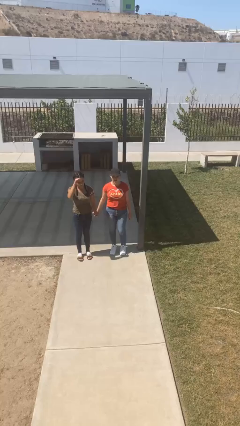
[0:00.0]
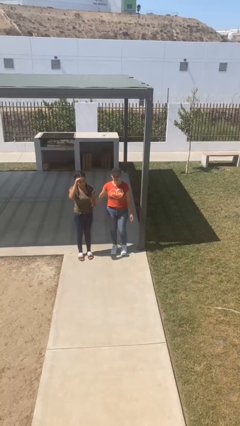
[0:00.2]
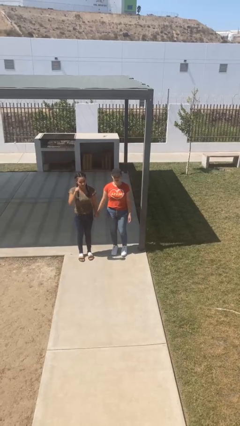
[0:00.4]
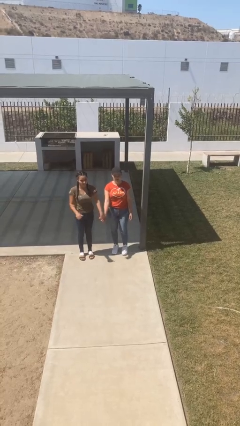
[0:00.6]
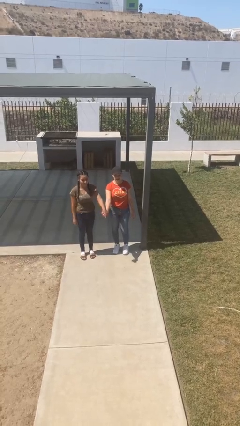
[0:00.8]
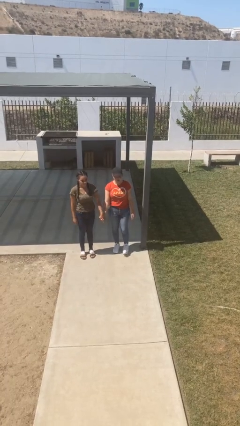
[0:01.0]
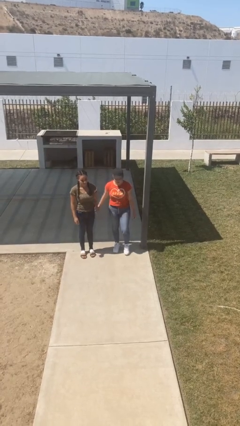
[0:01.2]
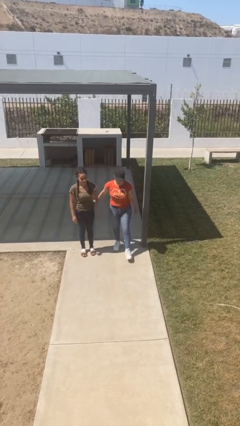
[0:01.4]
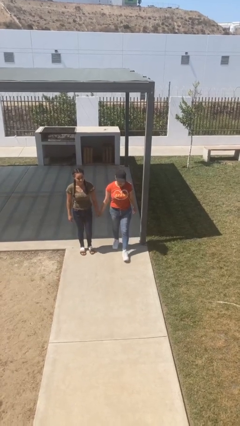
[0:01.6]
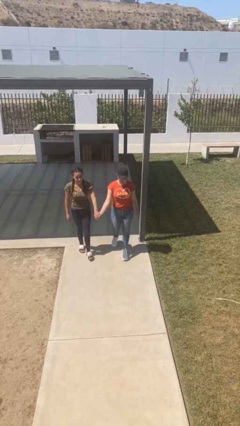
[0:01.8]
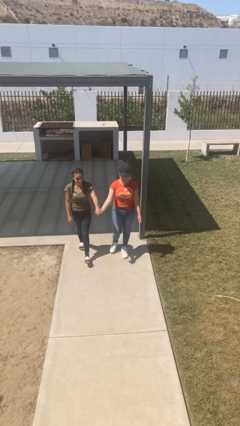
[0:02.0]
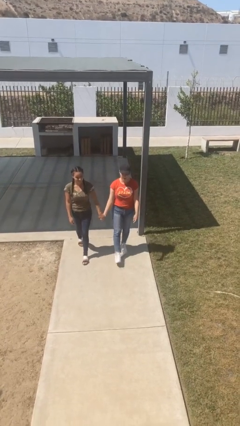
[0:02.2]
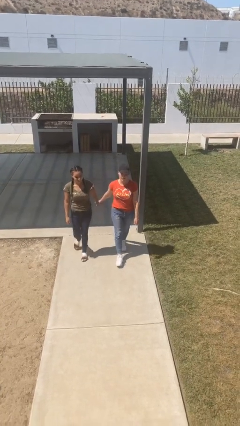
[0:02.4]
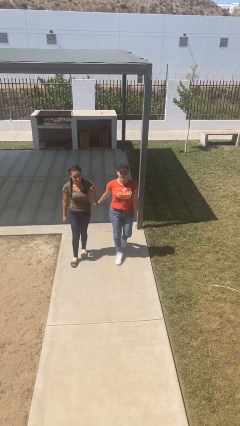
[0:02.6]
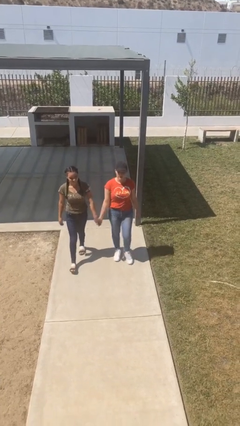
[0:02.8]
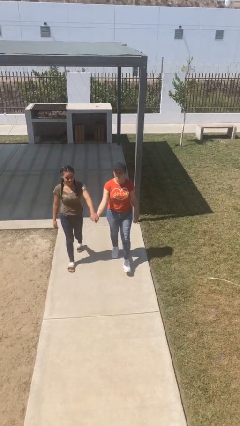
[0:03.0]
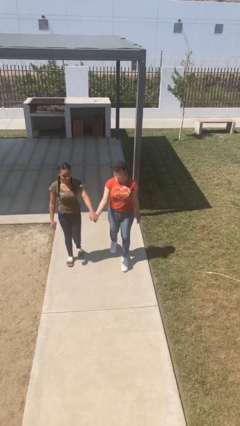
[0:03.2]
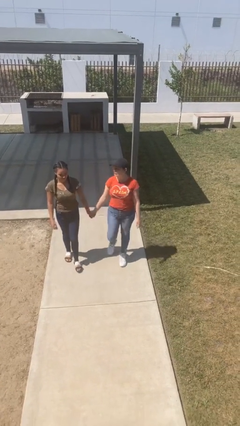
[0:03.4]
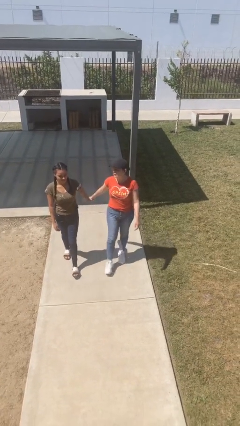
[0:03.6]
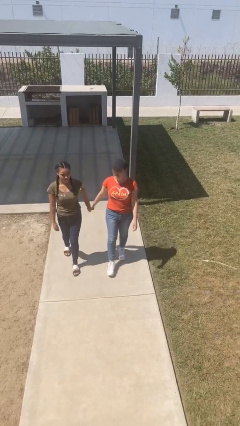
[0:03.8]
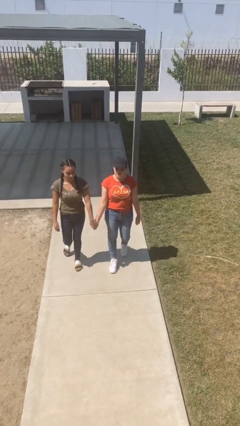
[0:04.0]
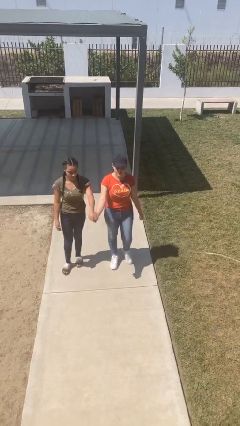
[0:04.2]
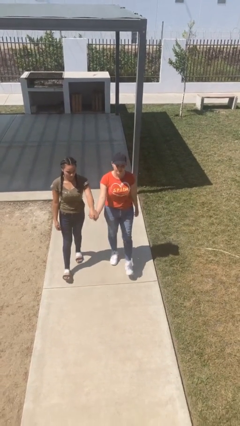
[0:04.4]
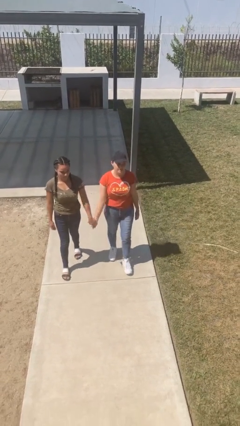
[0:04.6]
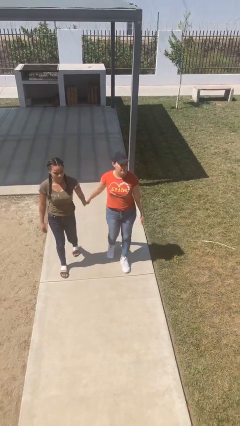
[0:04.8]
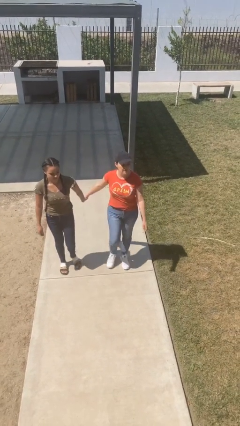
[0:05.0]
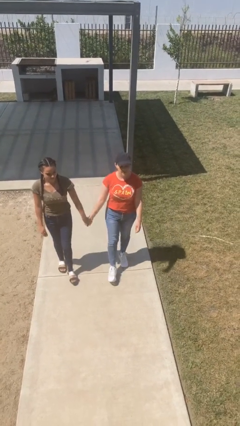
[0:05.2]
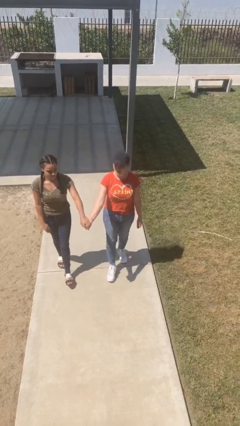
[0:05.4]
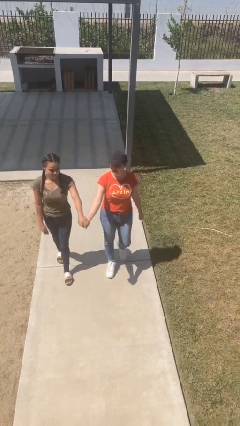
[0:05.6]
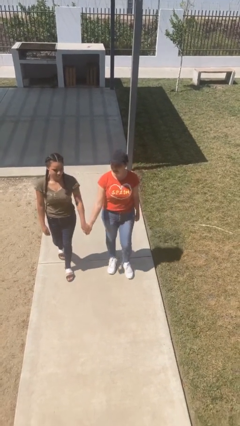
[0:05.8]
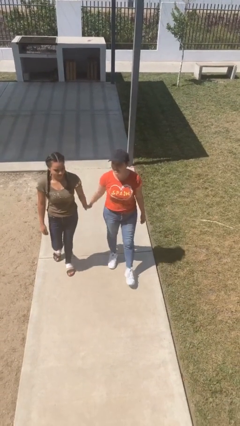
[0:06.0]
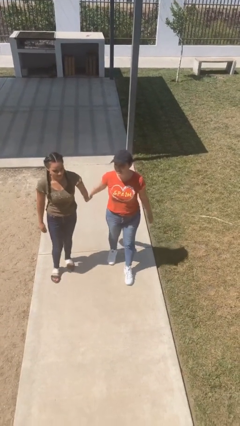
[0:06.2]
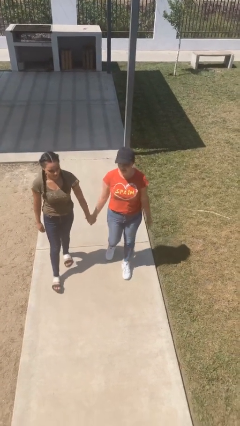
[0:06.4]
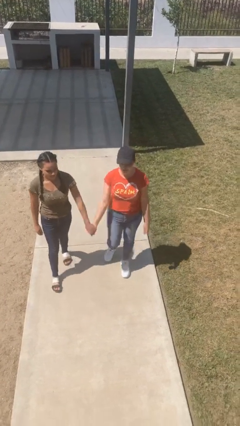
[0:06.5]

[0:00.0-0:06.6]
person holds hand

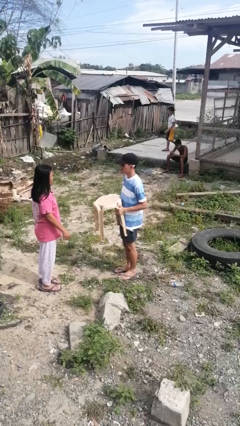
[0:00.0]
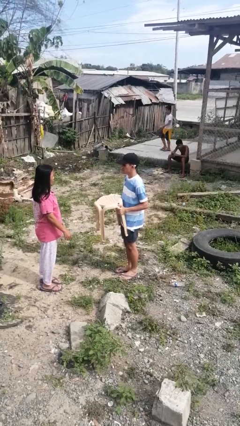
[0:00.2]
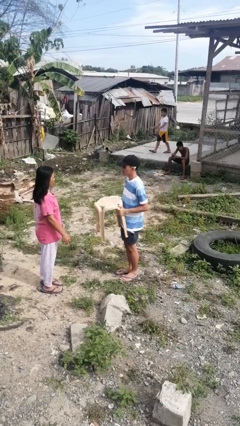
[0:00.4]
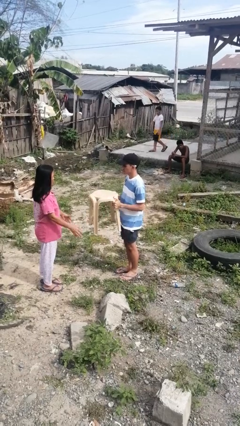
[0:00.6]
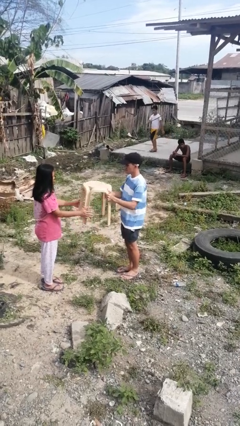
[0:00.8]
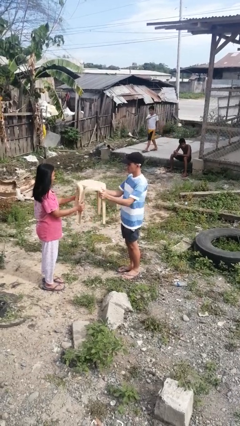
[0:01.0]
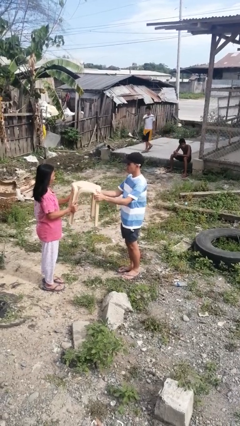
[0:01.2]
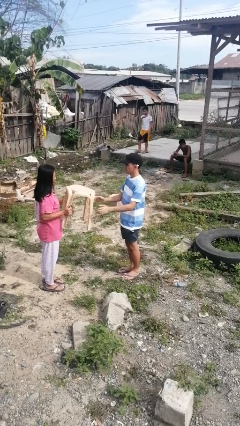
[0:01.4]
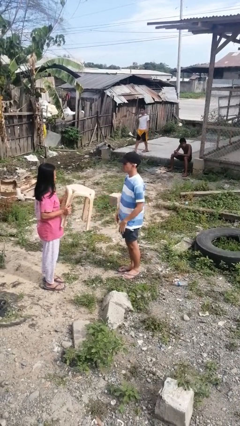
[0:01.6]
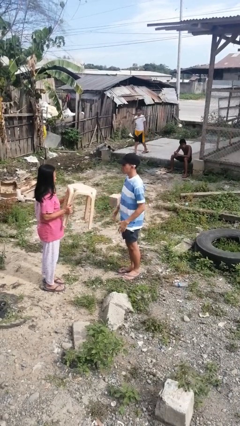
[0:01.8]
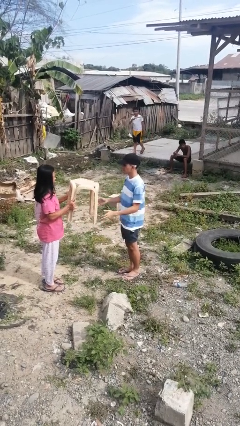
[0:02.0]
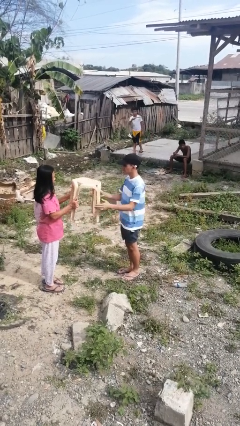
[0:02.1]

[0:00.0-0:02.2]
person transfers object to person

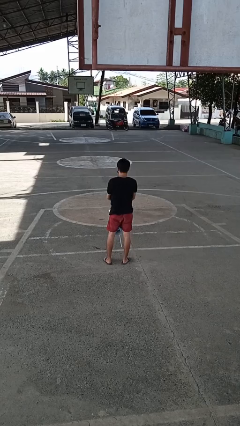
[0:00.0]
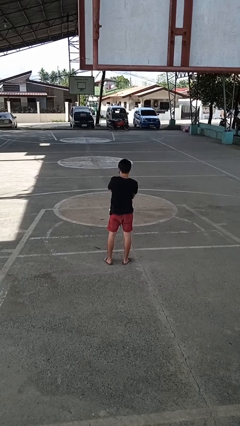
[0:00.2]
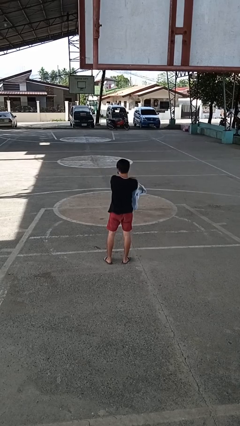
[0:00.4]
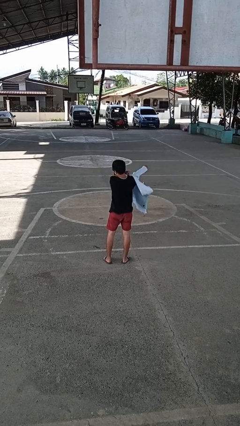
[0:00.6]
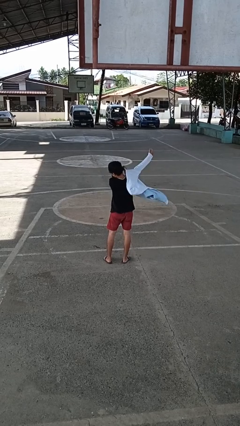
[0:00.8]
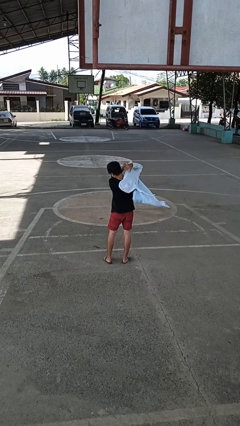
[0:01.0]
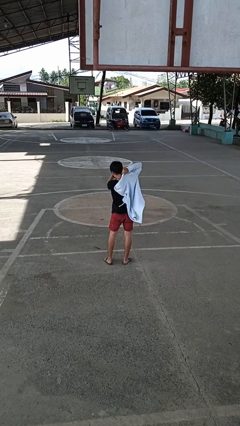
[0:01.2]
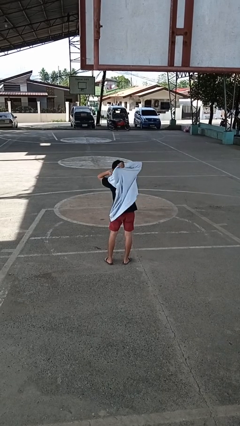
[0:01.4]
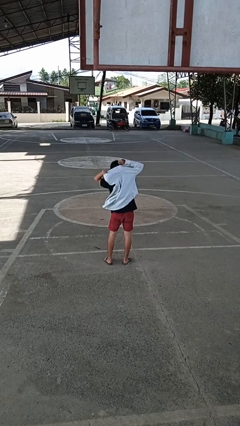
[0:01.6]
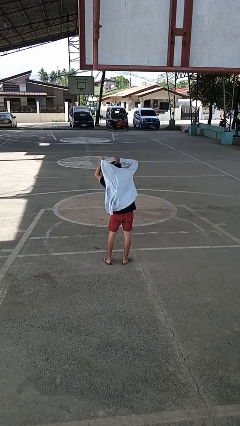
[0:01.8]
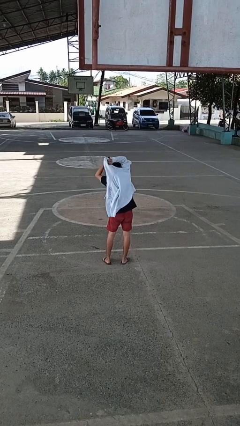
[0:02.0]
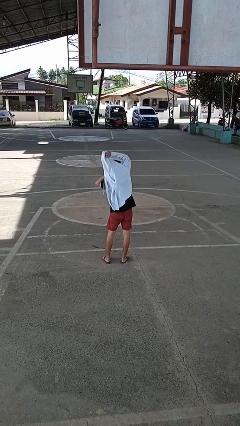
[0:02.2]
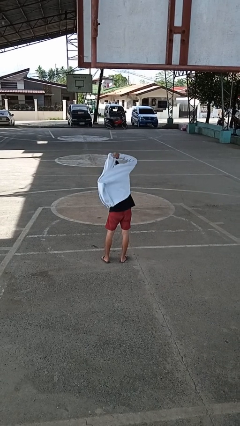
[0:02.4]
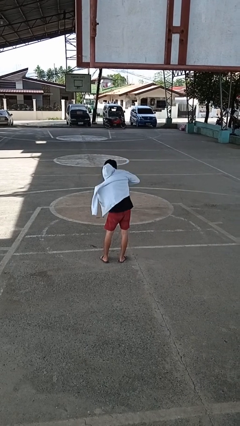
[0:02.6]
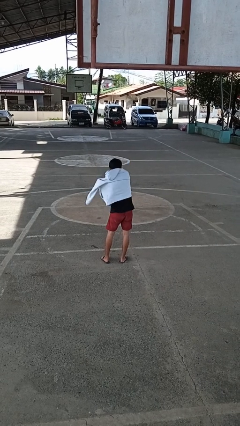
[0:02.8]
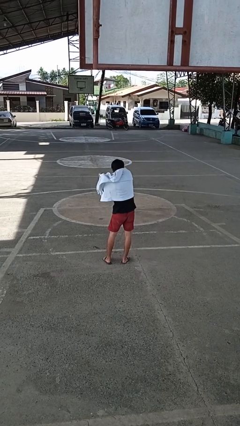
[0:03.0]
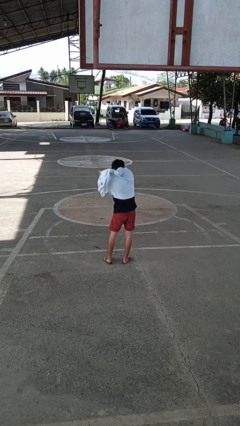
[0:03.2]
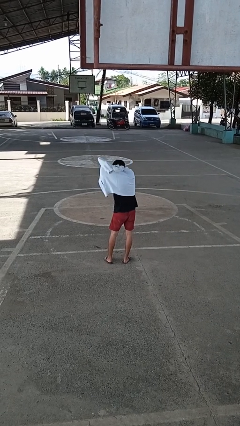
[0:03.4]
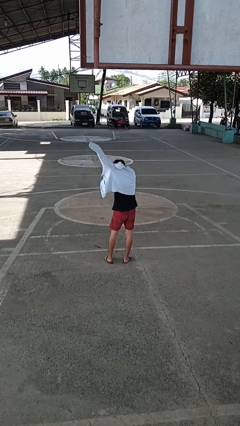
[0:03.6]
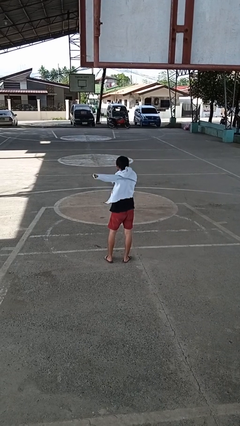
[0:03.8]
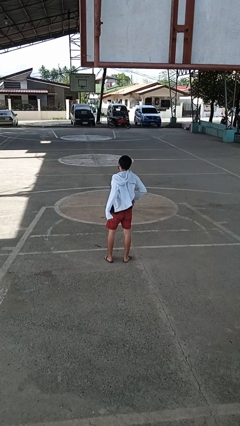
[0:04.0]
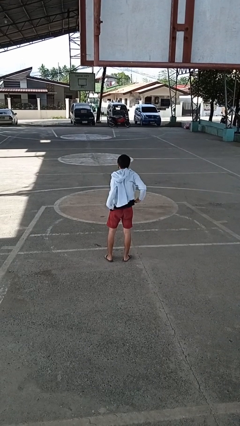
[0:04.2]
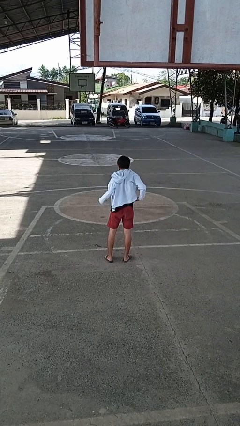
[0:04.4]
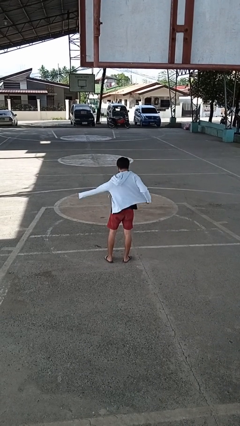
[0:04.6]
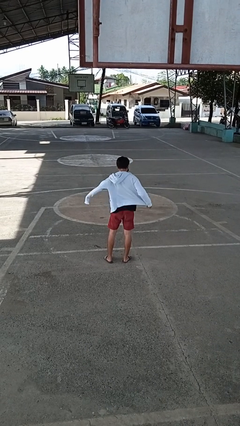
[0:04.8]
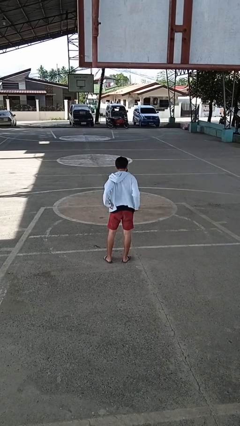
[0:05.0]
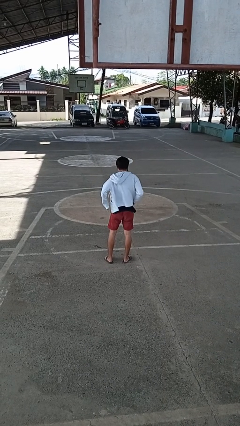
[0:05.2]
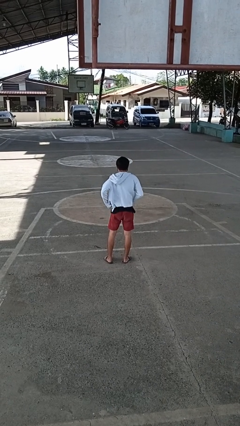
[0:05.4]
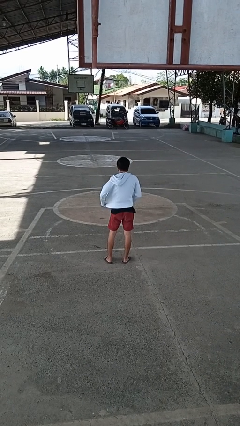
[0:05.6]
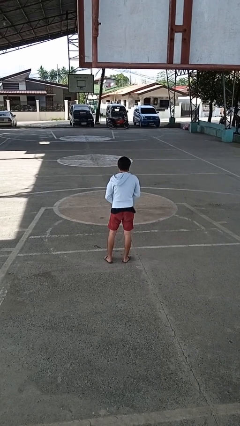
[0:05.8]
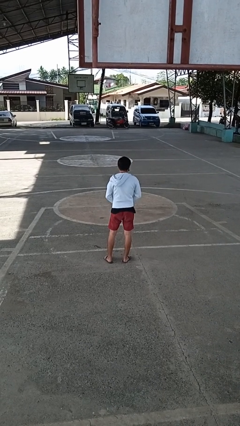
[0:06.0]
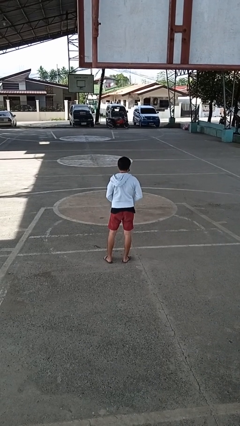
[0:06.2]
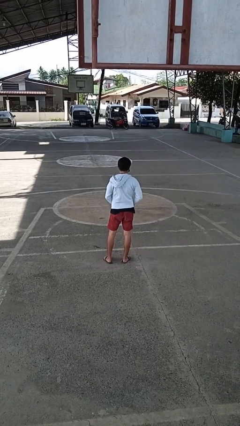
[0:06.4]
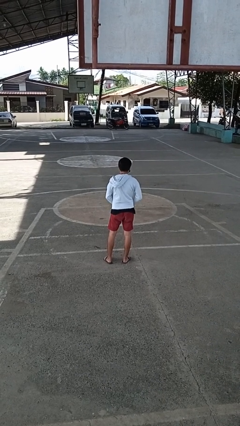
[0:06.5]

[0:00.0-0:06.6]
person puts on jacket

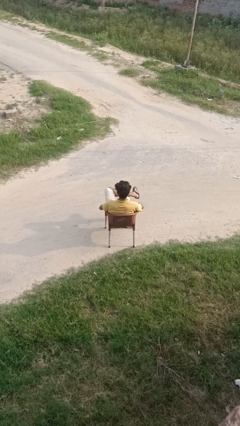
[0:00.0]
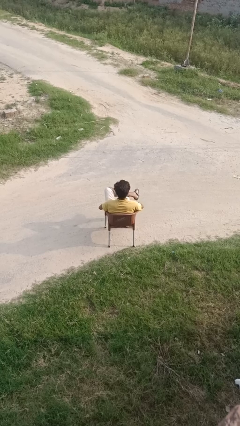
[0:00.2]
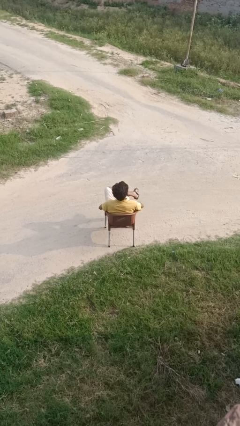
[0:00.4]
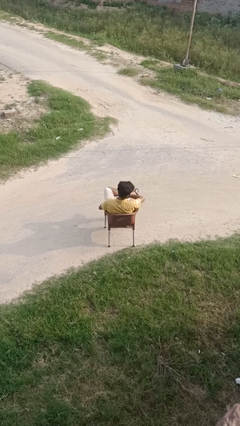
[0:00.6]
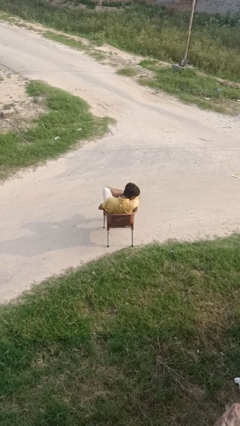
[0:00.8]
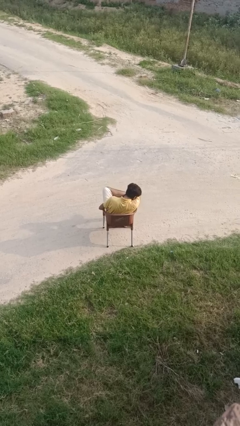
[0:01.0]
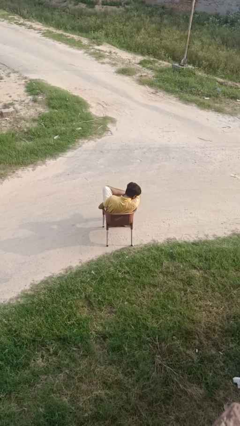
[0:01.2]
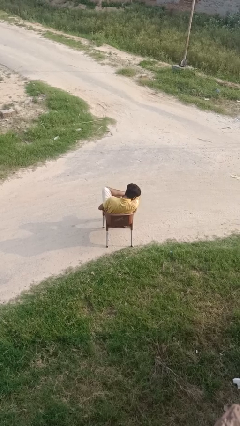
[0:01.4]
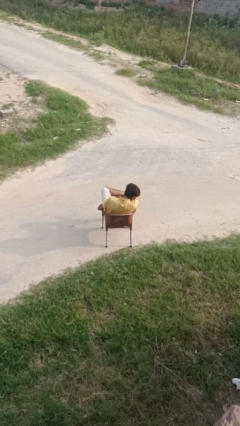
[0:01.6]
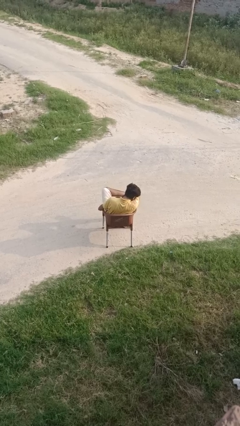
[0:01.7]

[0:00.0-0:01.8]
person sneezes into arm

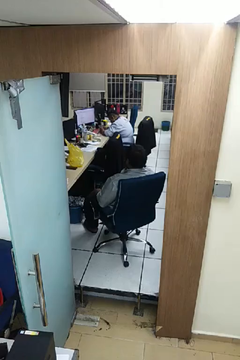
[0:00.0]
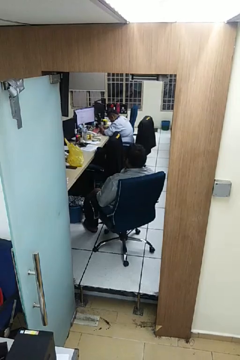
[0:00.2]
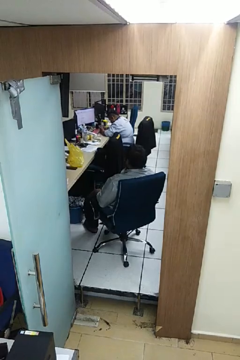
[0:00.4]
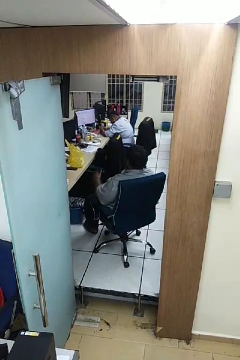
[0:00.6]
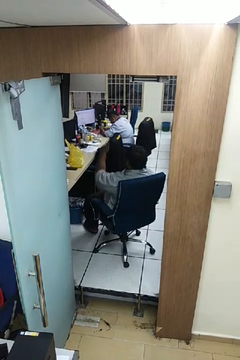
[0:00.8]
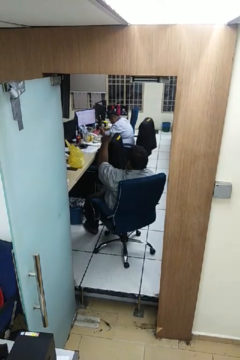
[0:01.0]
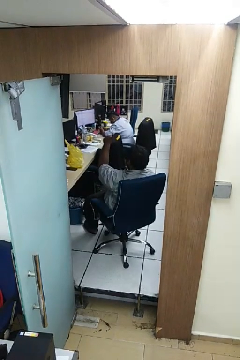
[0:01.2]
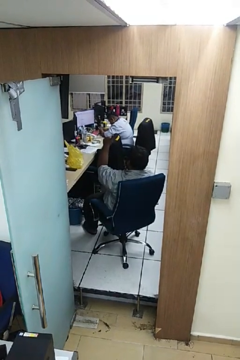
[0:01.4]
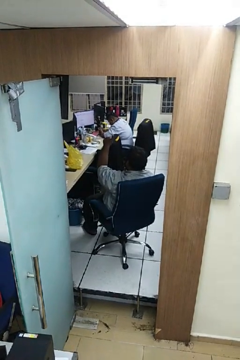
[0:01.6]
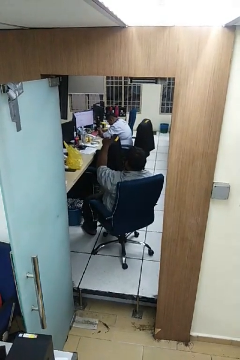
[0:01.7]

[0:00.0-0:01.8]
person gestures thumbs up
